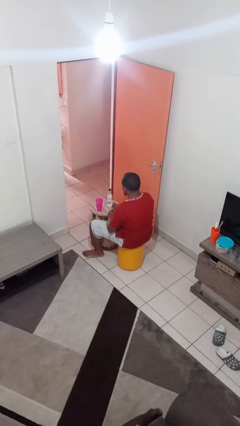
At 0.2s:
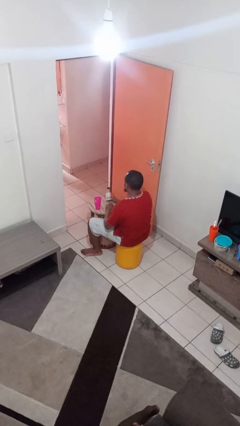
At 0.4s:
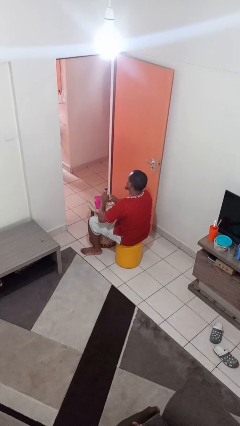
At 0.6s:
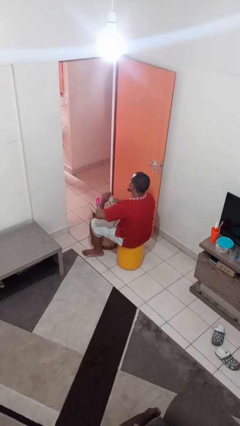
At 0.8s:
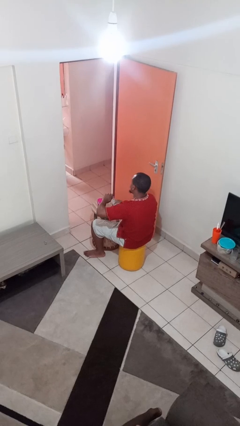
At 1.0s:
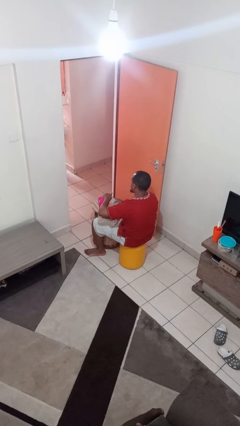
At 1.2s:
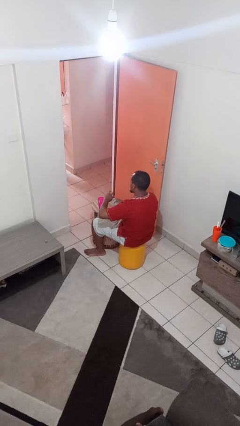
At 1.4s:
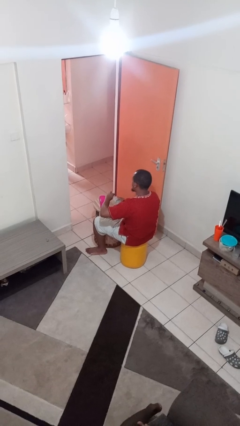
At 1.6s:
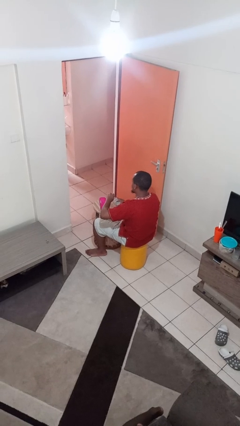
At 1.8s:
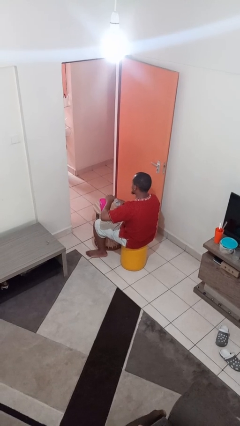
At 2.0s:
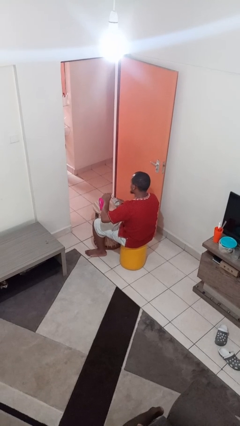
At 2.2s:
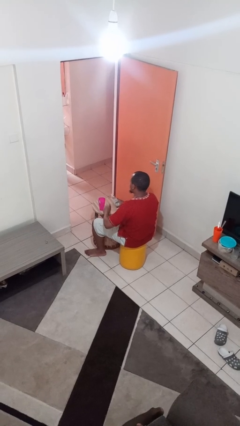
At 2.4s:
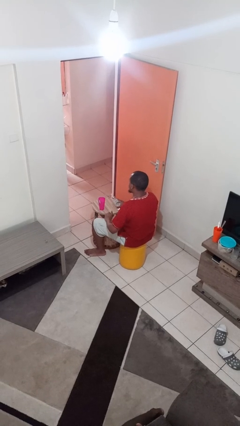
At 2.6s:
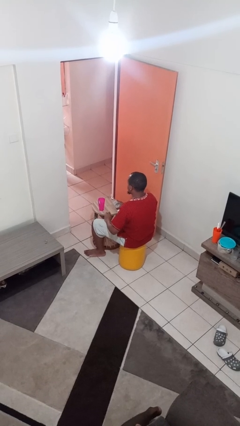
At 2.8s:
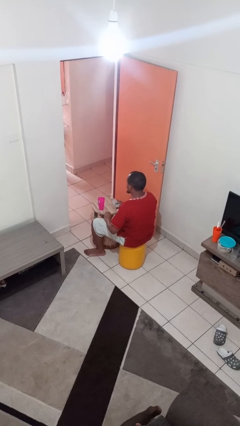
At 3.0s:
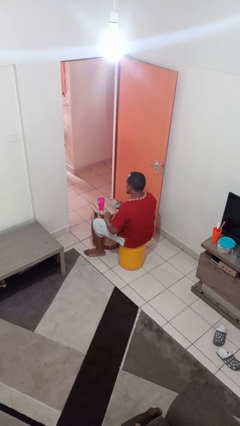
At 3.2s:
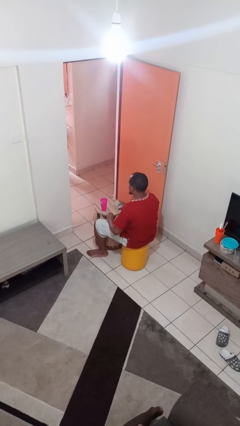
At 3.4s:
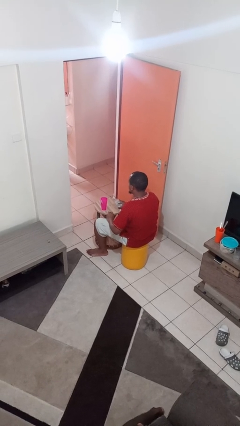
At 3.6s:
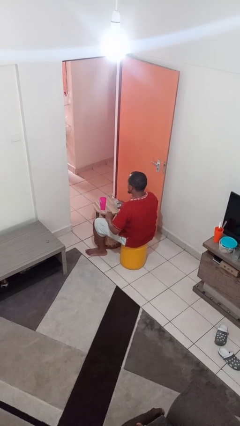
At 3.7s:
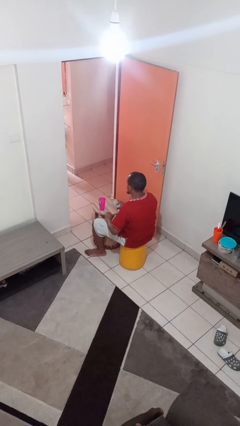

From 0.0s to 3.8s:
person unscrews lid from bottle

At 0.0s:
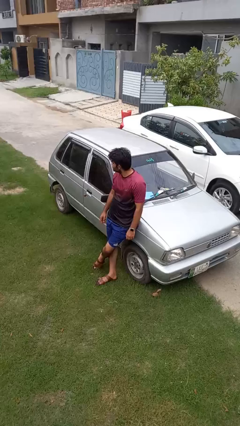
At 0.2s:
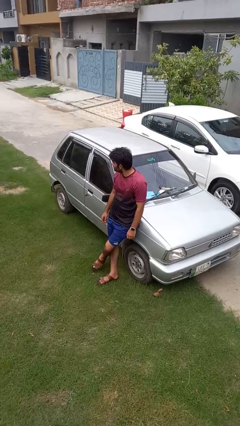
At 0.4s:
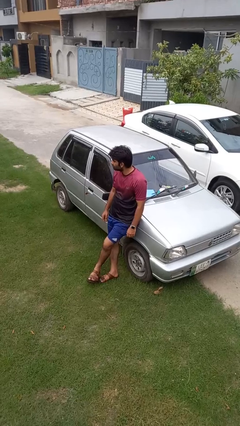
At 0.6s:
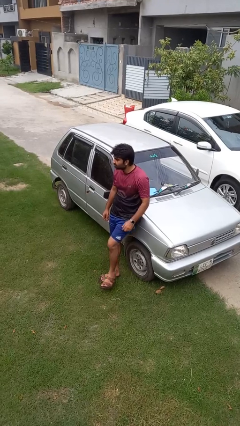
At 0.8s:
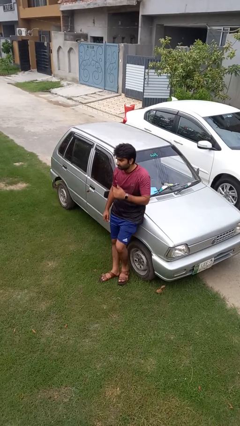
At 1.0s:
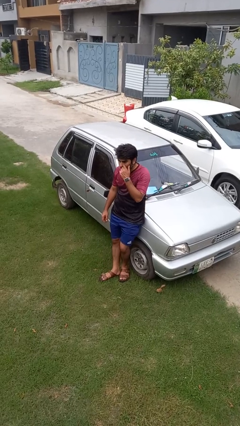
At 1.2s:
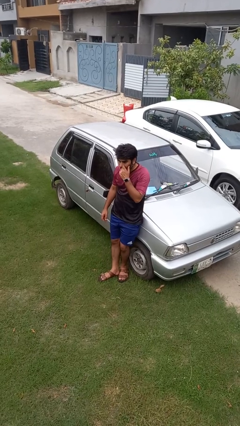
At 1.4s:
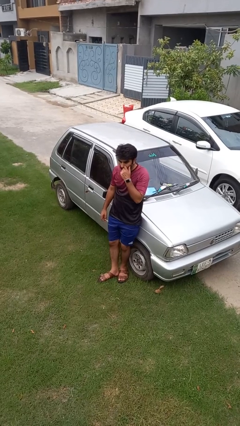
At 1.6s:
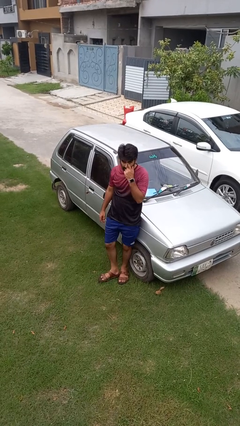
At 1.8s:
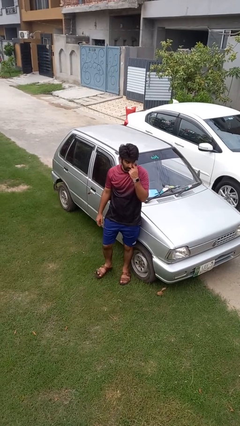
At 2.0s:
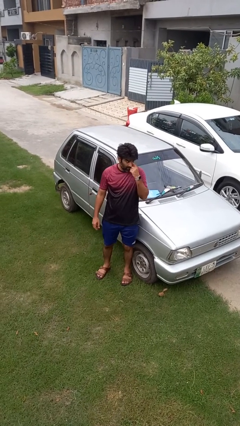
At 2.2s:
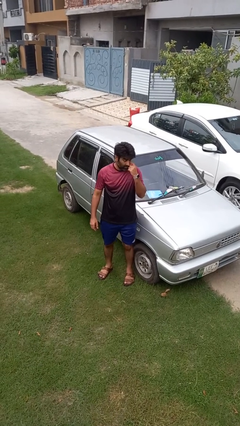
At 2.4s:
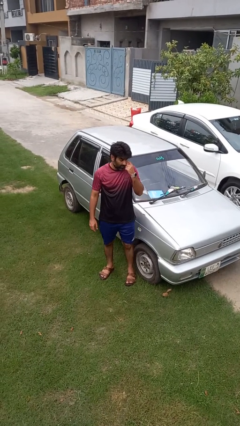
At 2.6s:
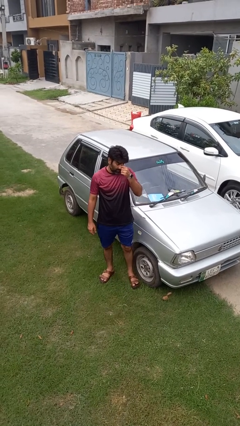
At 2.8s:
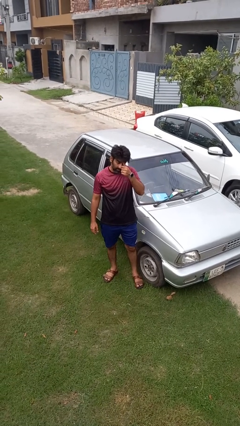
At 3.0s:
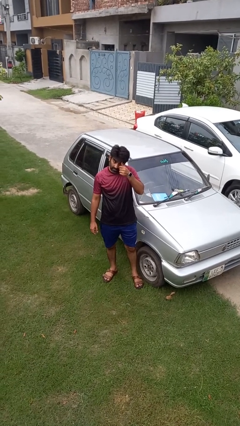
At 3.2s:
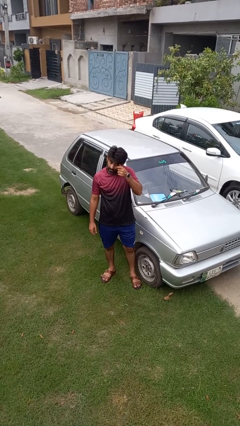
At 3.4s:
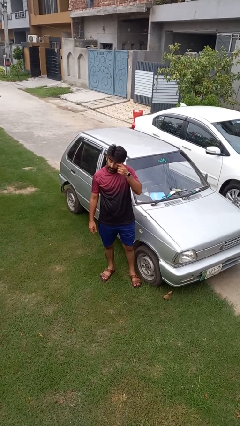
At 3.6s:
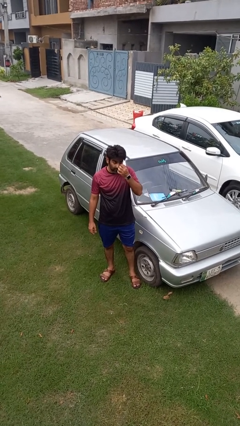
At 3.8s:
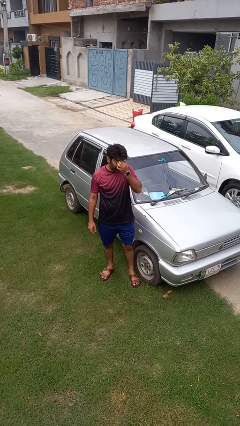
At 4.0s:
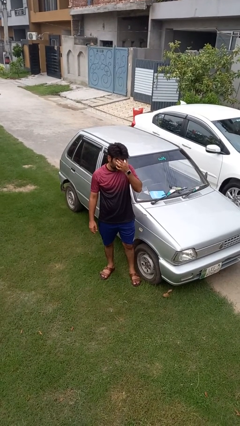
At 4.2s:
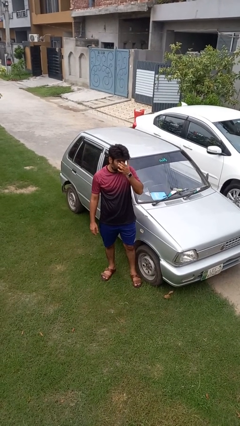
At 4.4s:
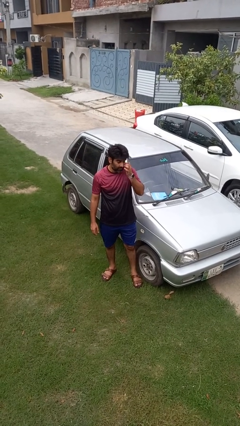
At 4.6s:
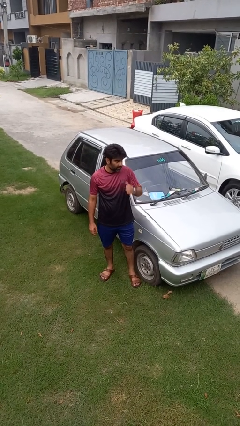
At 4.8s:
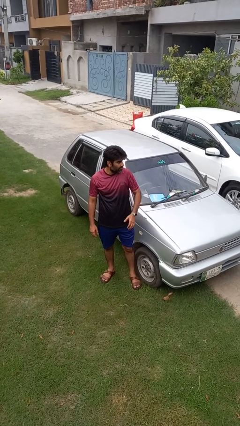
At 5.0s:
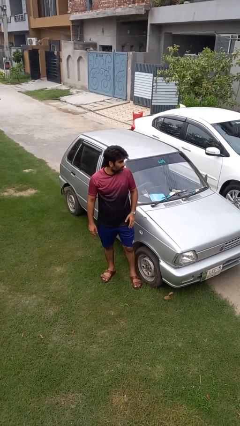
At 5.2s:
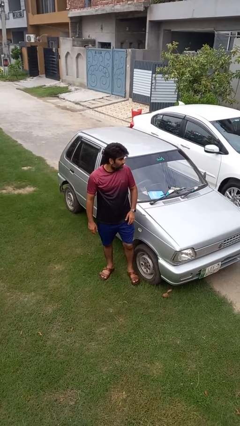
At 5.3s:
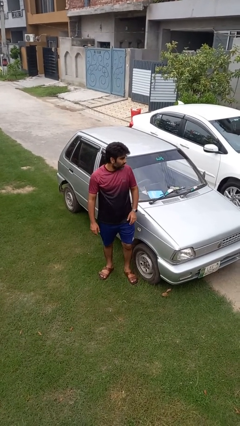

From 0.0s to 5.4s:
person scratches face

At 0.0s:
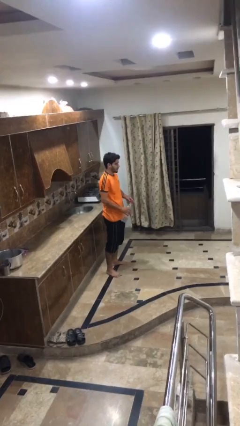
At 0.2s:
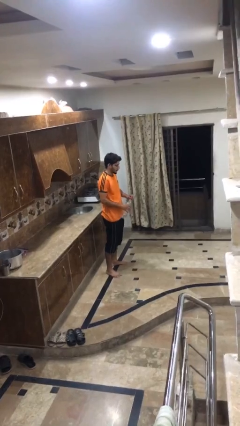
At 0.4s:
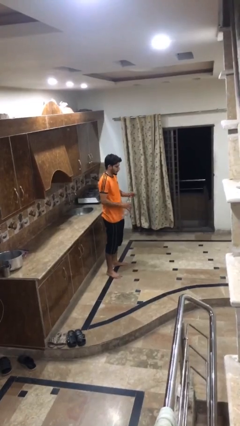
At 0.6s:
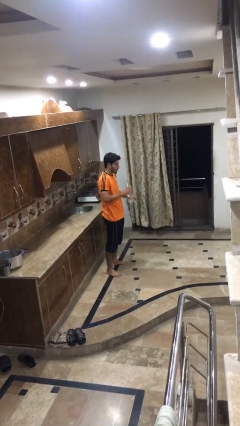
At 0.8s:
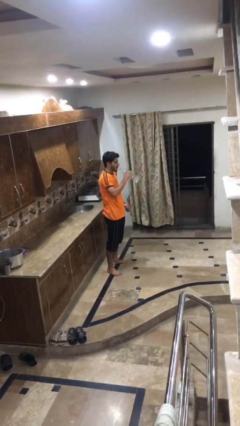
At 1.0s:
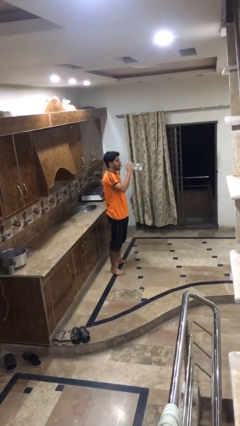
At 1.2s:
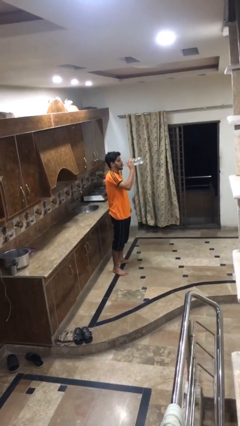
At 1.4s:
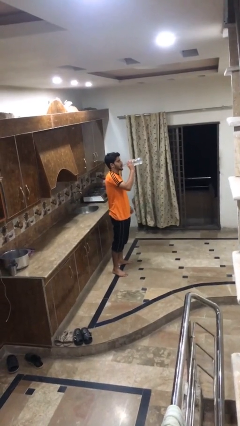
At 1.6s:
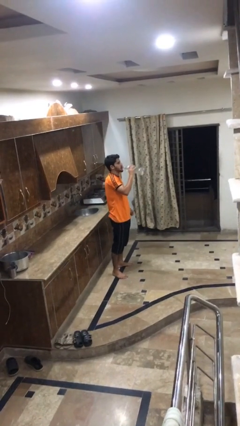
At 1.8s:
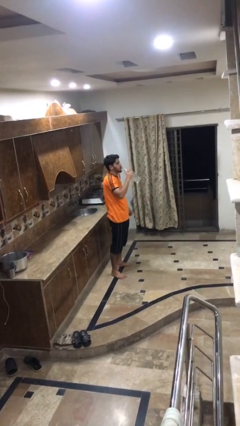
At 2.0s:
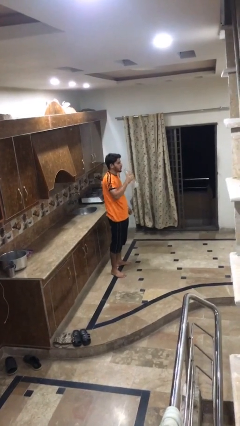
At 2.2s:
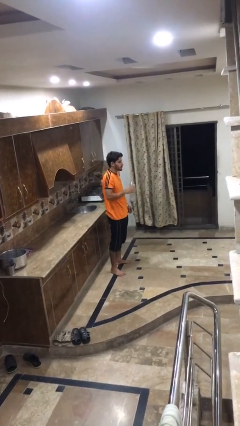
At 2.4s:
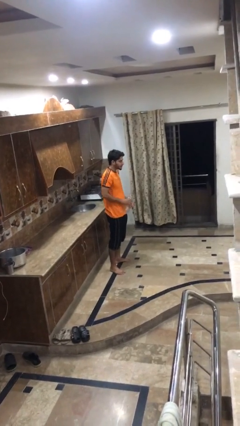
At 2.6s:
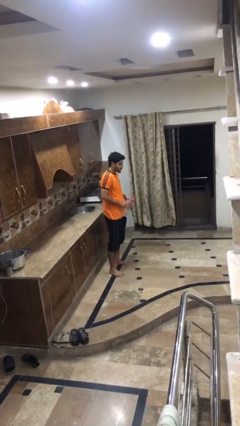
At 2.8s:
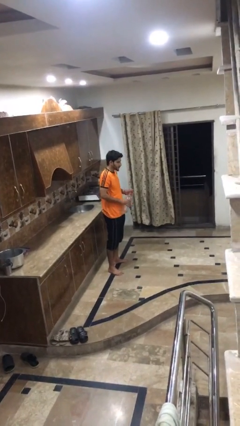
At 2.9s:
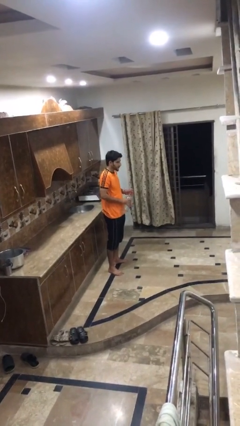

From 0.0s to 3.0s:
person drinks from bottle

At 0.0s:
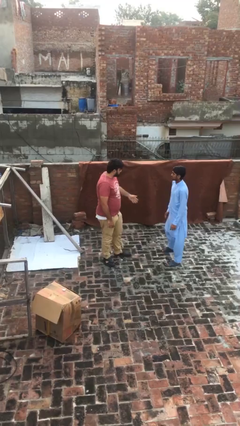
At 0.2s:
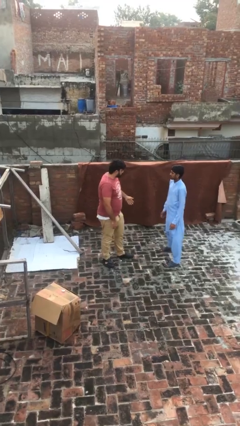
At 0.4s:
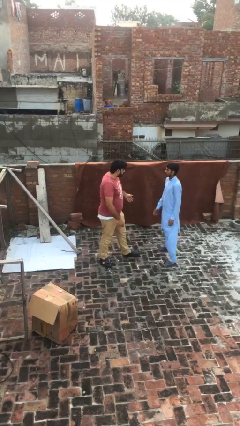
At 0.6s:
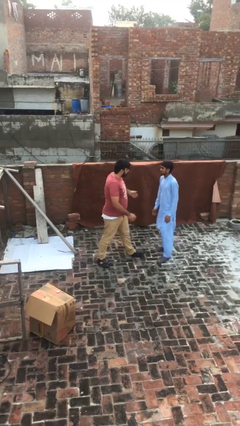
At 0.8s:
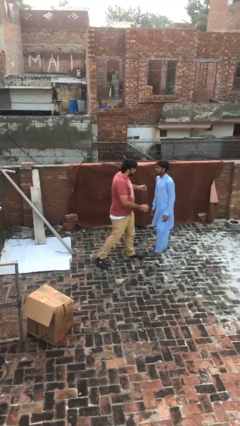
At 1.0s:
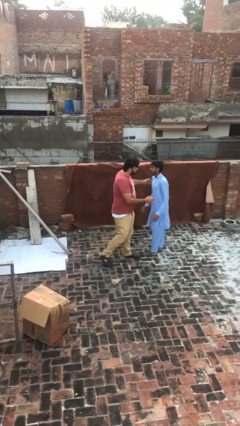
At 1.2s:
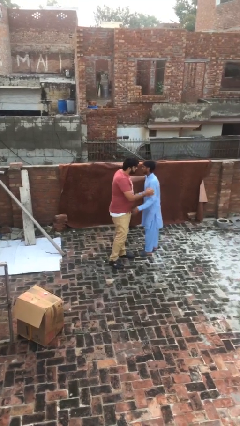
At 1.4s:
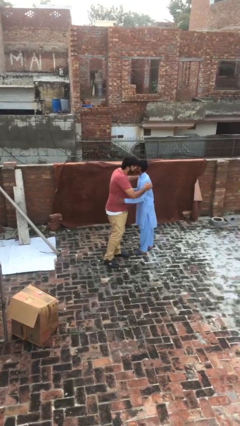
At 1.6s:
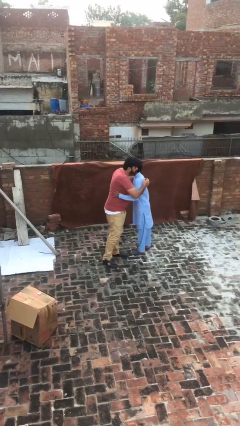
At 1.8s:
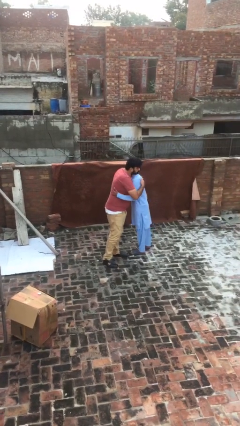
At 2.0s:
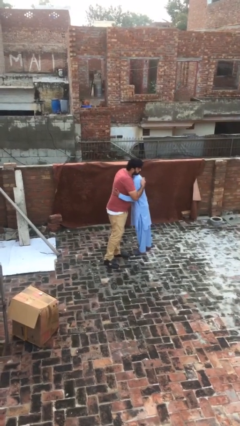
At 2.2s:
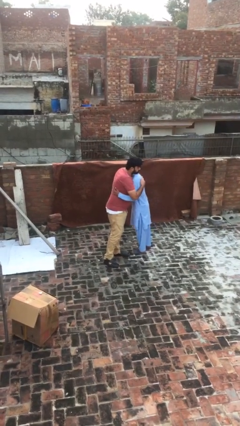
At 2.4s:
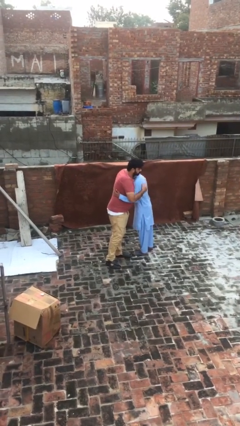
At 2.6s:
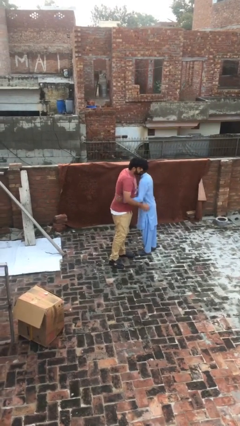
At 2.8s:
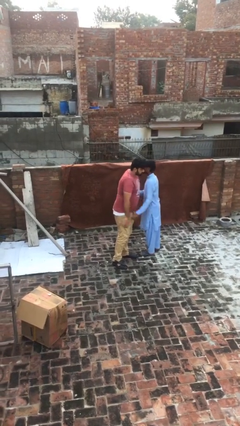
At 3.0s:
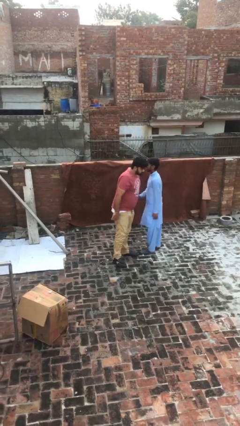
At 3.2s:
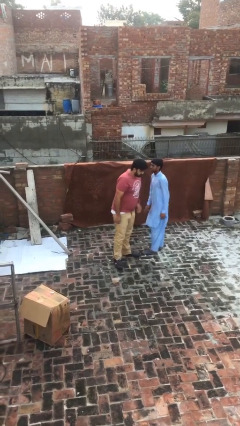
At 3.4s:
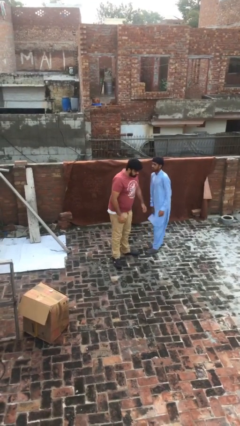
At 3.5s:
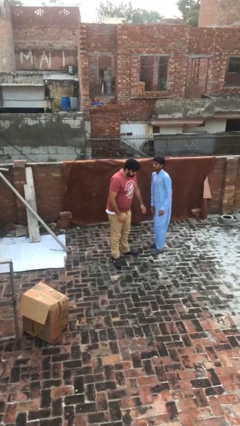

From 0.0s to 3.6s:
person embraces person

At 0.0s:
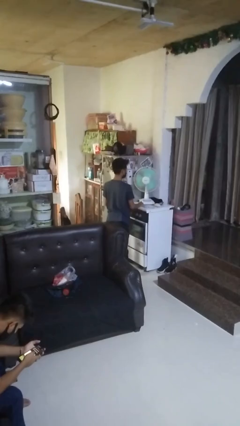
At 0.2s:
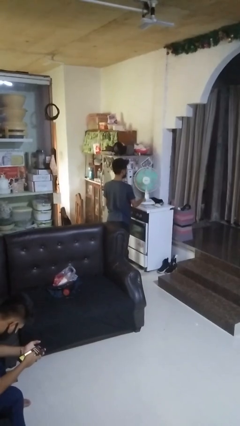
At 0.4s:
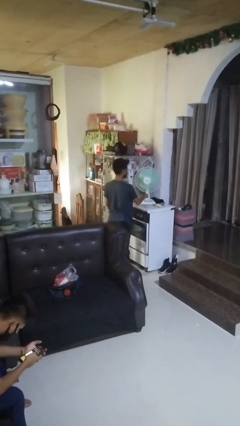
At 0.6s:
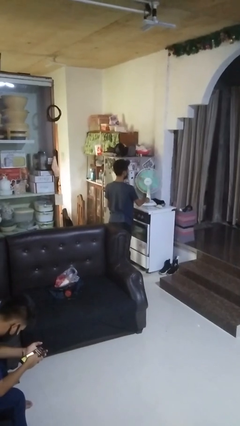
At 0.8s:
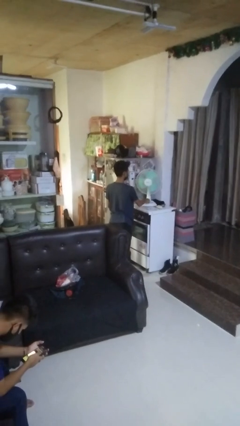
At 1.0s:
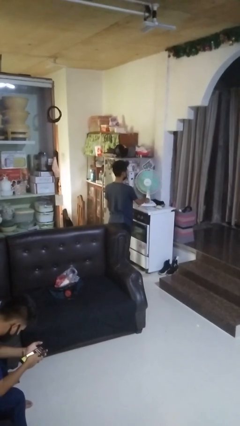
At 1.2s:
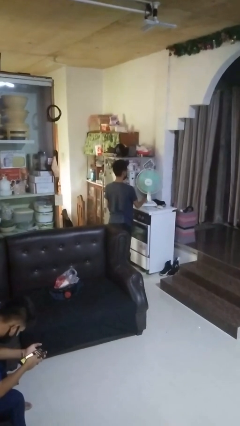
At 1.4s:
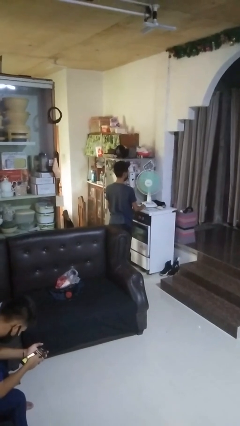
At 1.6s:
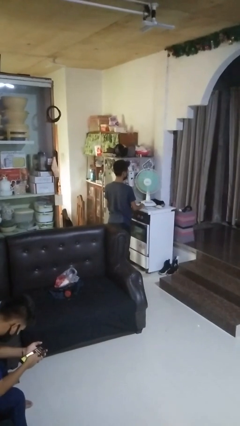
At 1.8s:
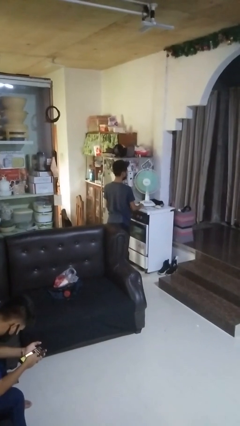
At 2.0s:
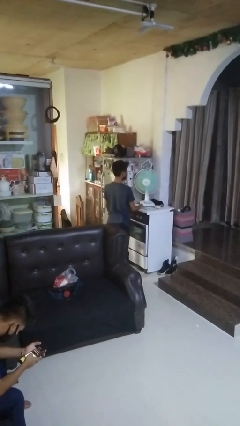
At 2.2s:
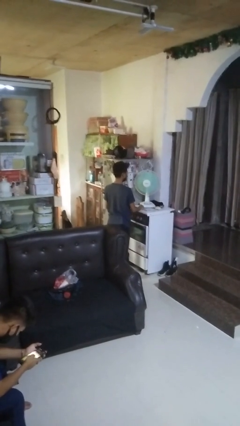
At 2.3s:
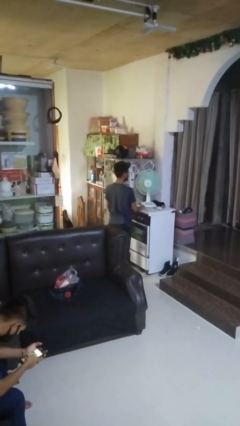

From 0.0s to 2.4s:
person turns on fan
